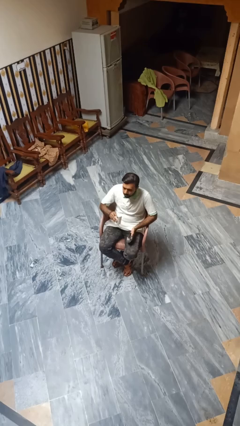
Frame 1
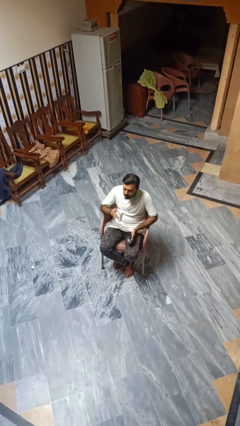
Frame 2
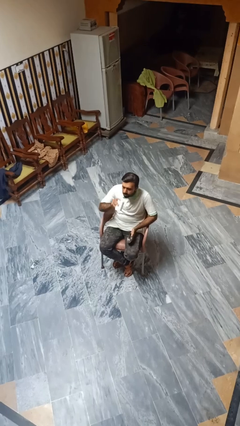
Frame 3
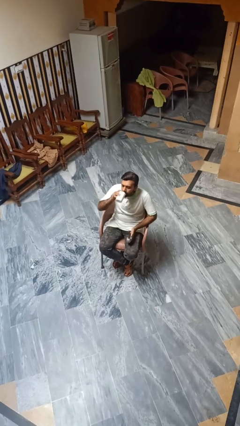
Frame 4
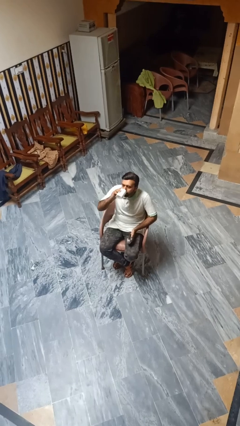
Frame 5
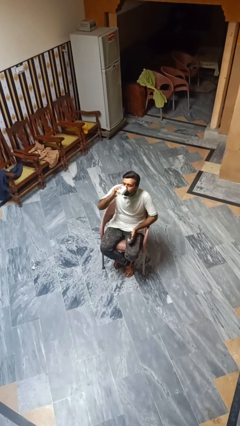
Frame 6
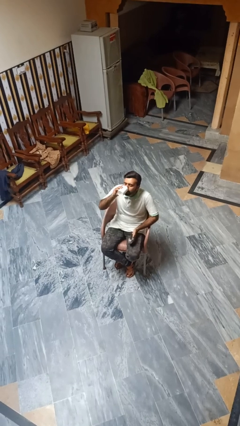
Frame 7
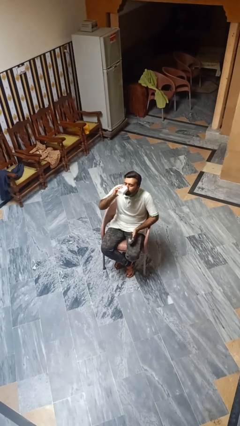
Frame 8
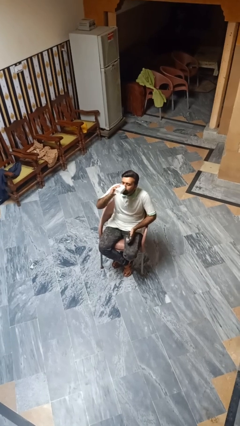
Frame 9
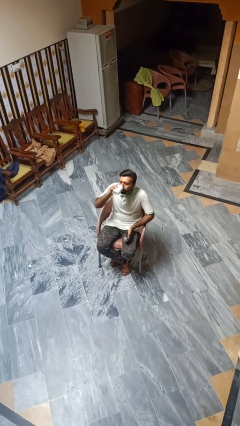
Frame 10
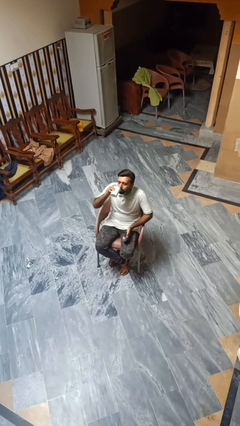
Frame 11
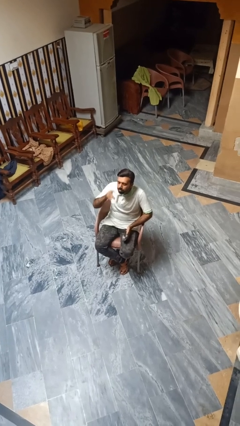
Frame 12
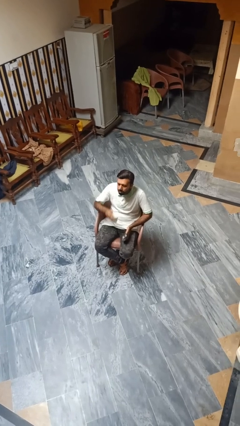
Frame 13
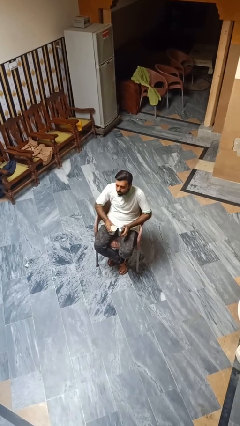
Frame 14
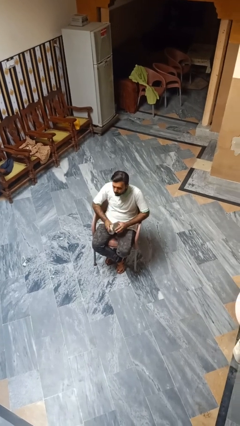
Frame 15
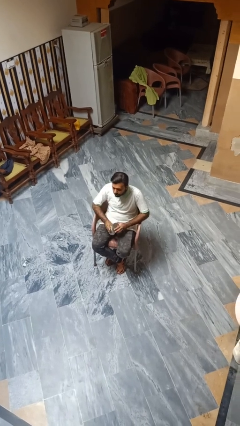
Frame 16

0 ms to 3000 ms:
person drinks from beverage can

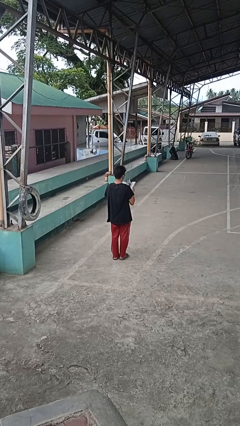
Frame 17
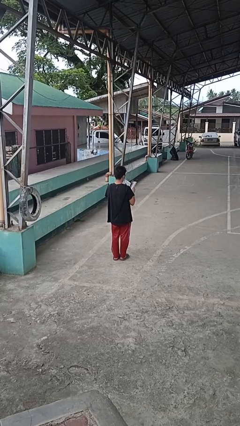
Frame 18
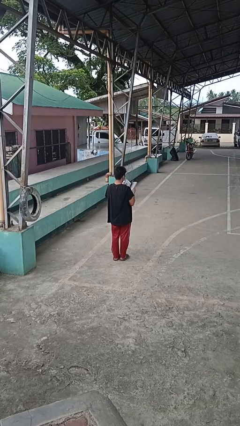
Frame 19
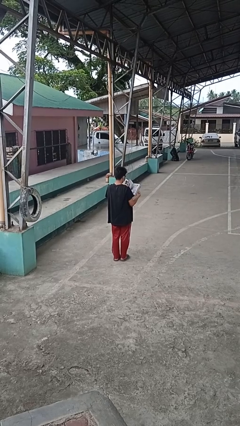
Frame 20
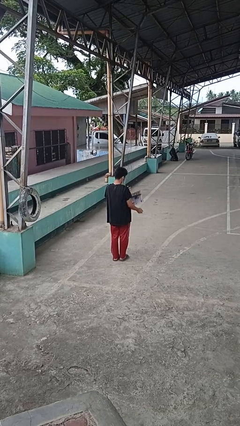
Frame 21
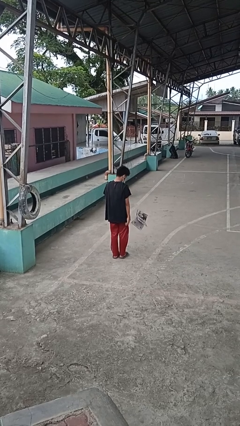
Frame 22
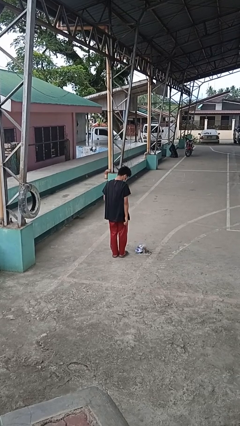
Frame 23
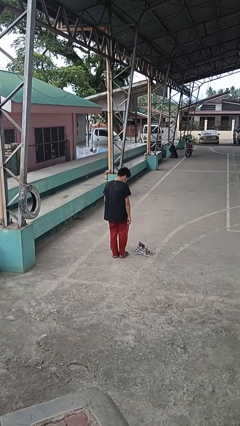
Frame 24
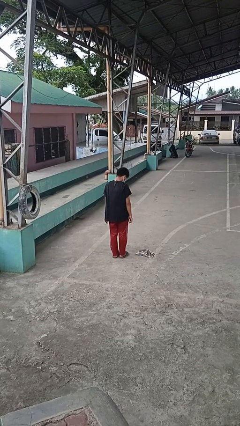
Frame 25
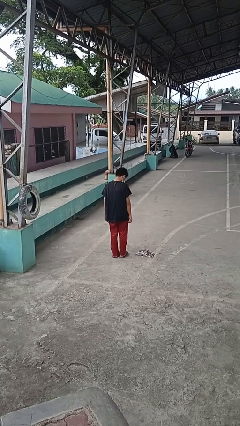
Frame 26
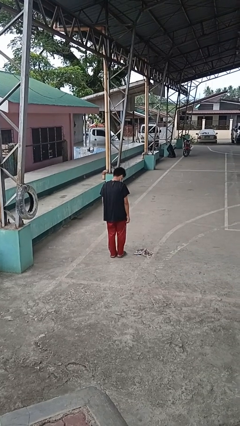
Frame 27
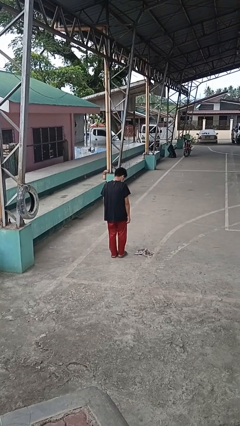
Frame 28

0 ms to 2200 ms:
person drops object

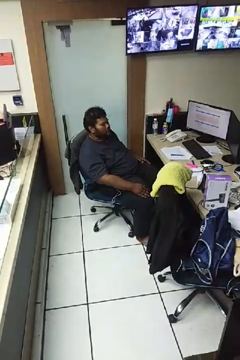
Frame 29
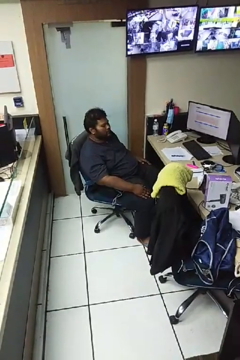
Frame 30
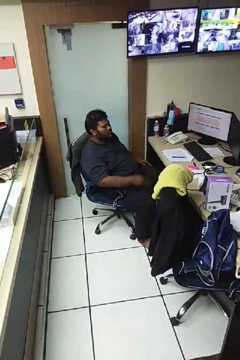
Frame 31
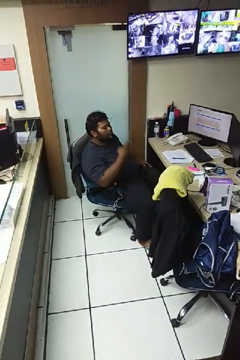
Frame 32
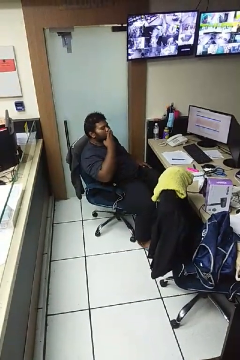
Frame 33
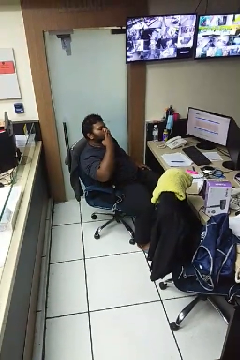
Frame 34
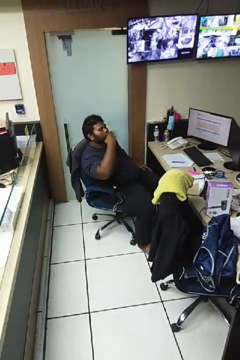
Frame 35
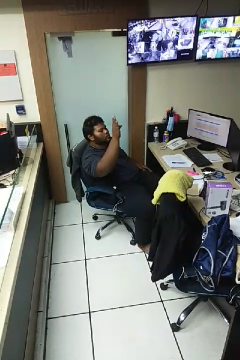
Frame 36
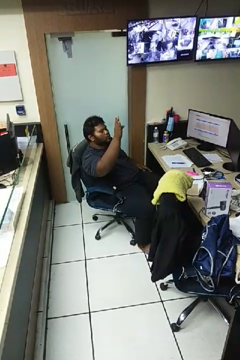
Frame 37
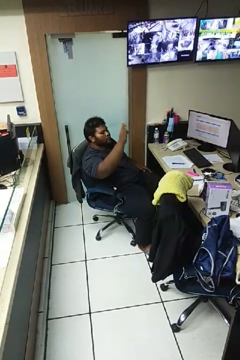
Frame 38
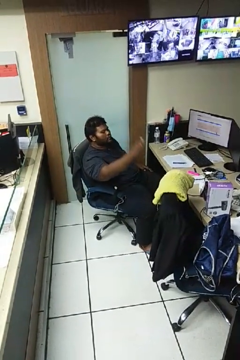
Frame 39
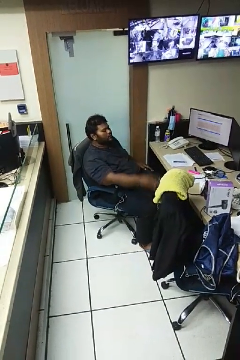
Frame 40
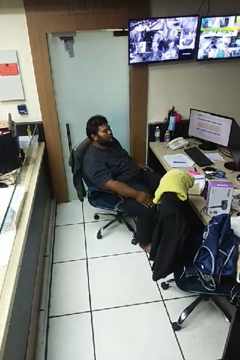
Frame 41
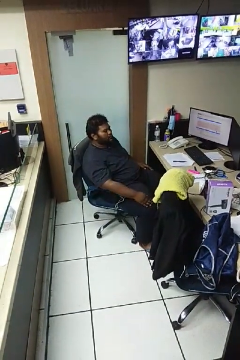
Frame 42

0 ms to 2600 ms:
person gestures blow kiss

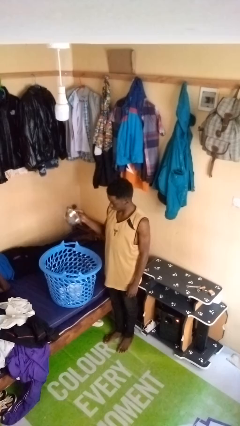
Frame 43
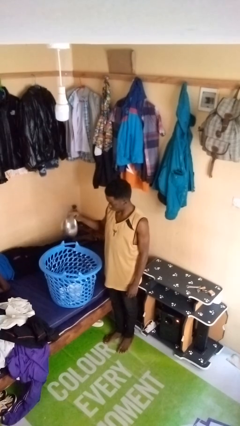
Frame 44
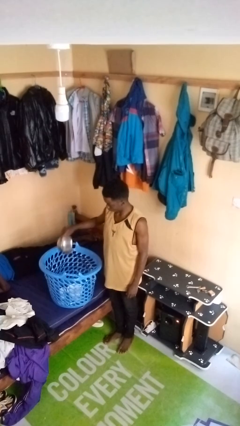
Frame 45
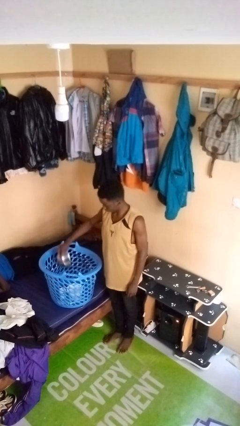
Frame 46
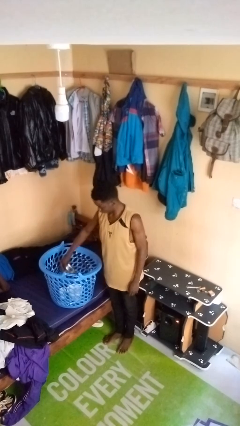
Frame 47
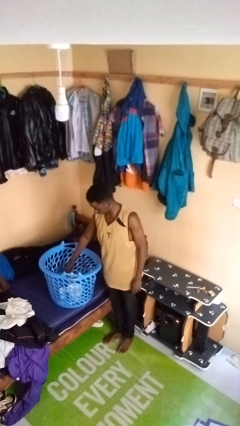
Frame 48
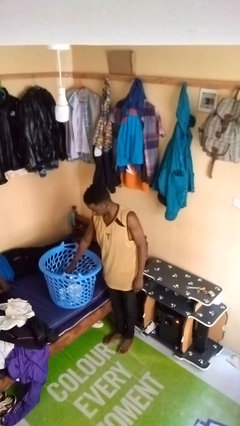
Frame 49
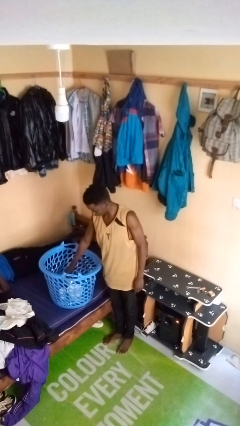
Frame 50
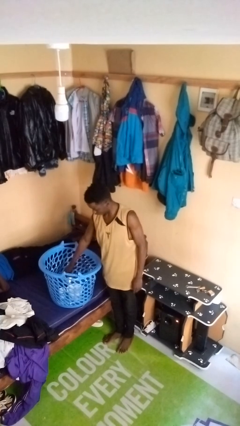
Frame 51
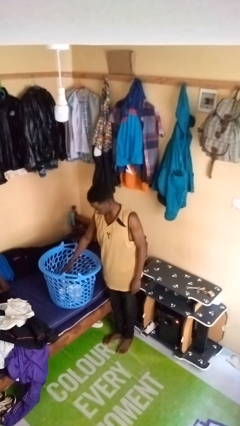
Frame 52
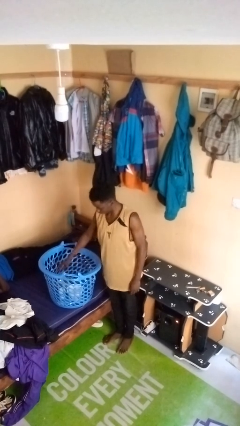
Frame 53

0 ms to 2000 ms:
person puts object into basket

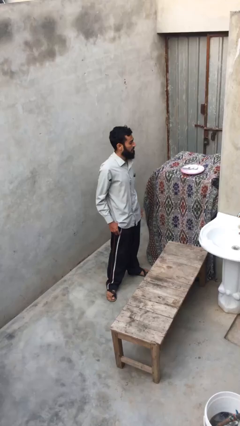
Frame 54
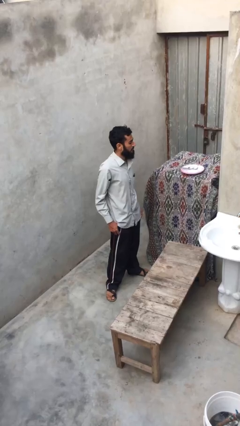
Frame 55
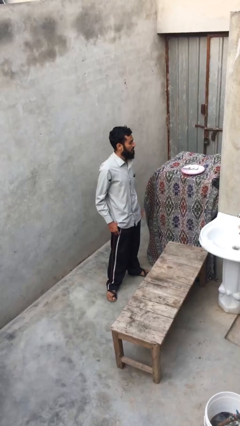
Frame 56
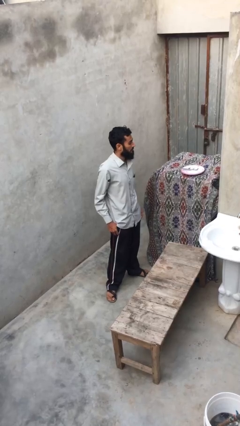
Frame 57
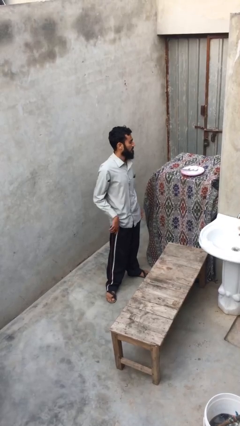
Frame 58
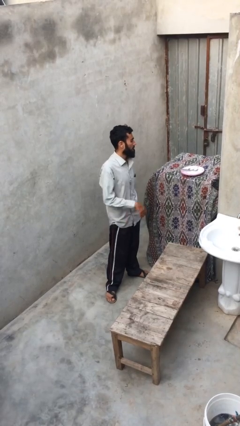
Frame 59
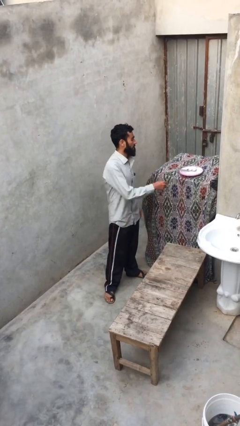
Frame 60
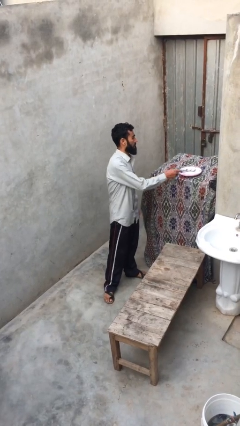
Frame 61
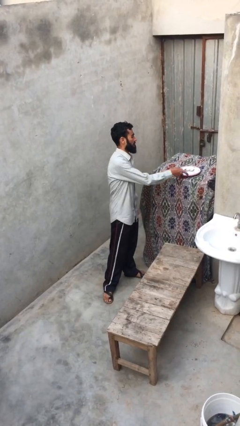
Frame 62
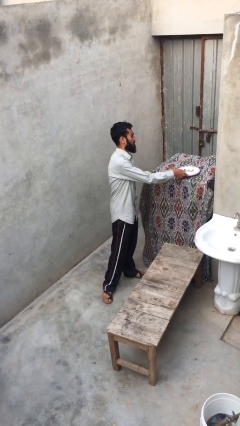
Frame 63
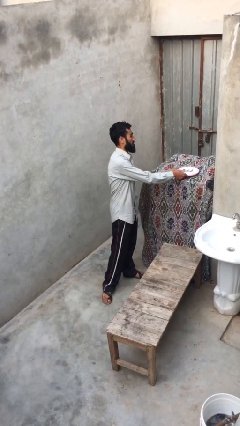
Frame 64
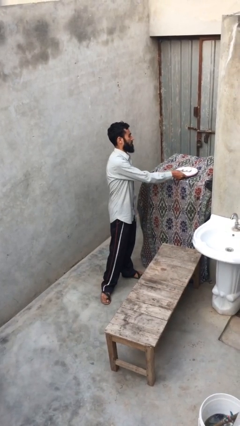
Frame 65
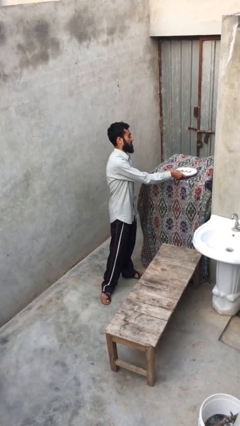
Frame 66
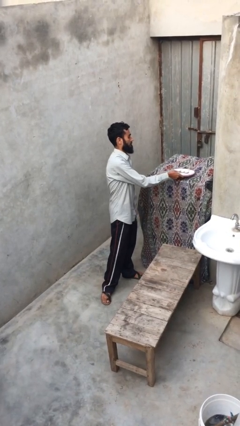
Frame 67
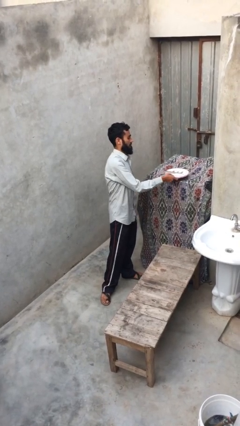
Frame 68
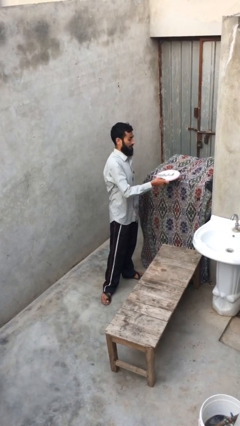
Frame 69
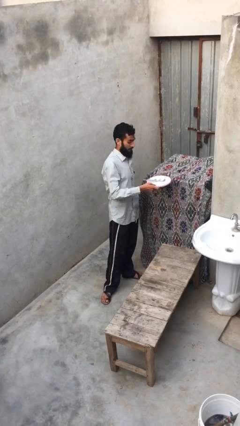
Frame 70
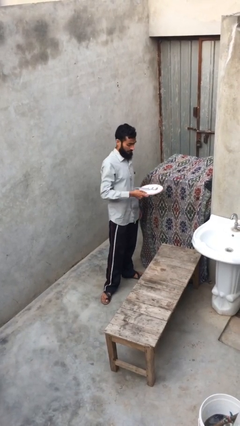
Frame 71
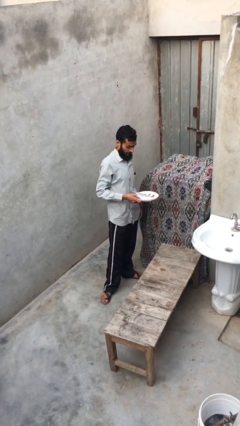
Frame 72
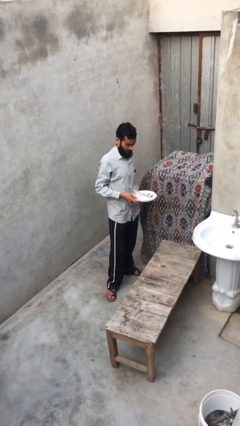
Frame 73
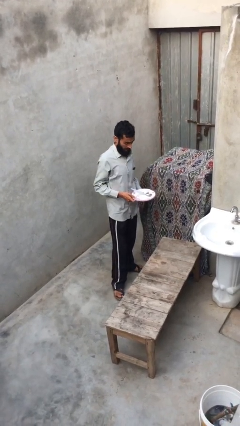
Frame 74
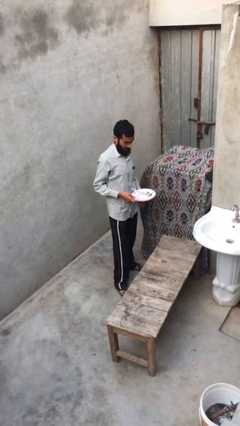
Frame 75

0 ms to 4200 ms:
person picks up object from shelf

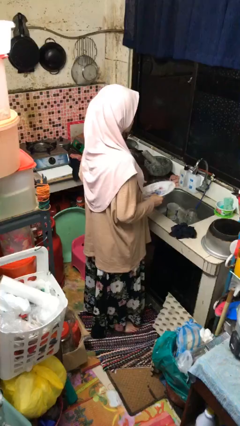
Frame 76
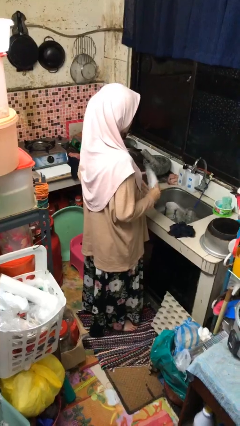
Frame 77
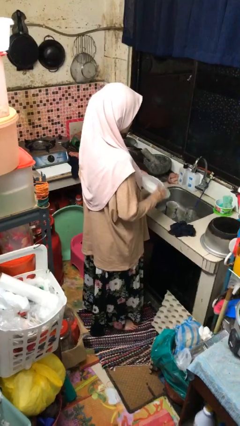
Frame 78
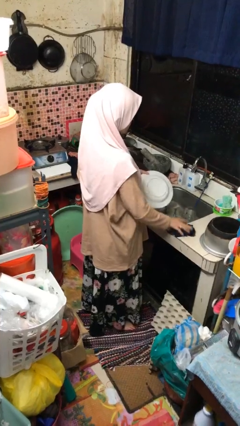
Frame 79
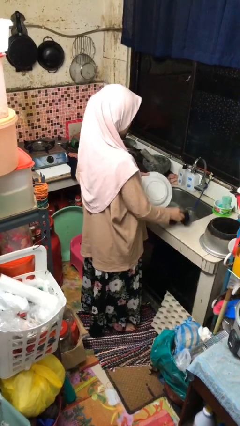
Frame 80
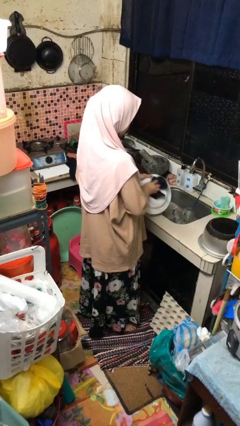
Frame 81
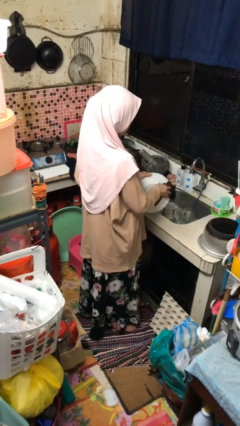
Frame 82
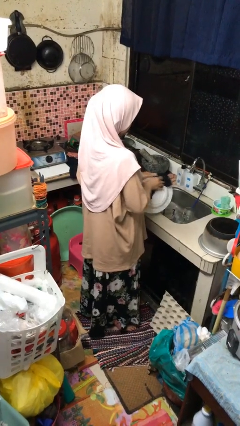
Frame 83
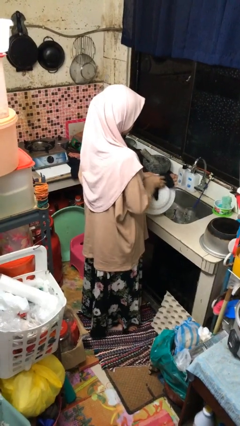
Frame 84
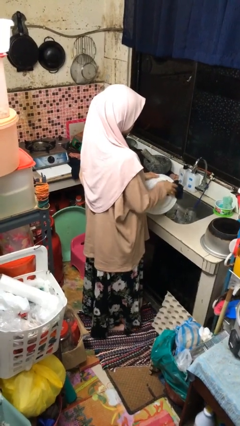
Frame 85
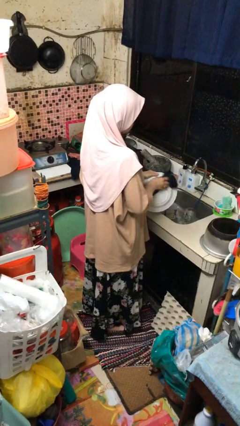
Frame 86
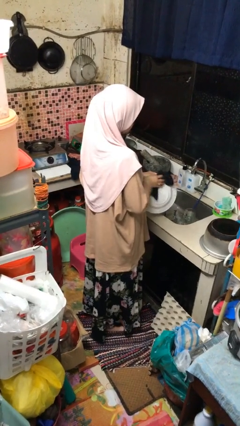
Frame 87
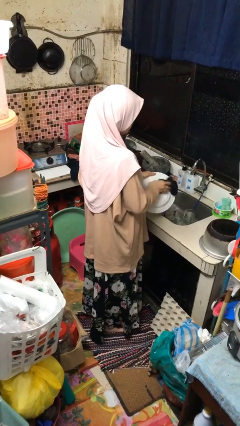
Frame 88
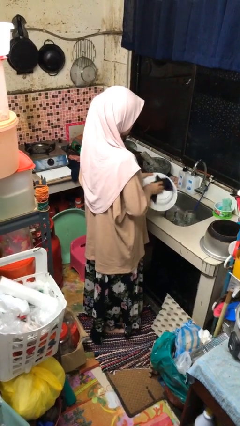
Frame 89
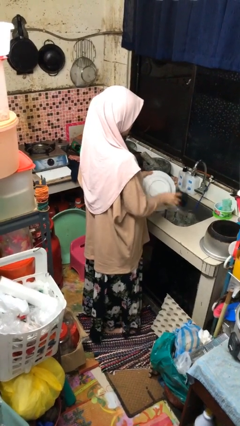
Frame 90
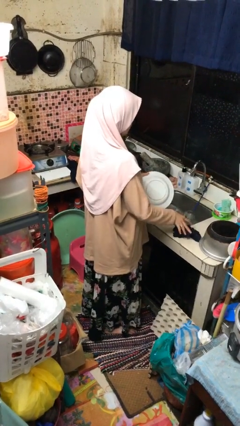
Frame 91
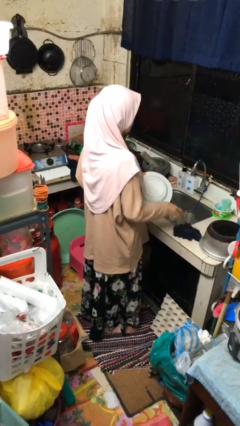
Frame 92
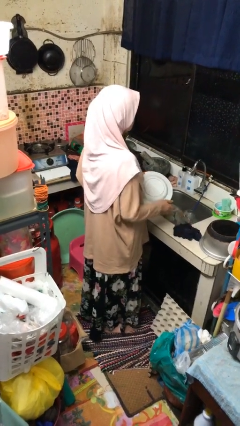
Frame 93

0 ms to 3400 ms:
person dries dish

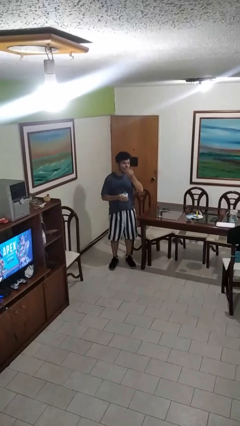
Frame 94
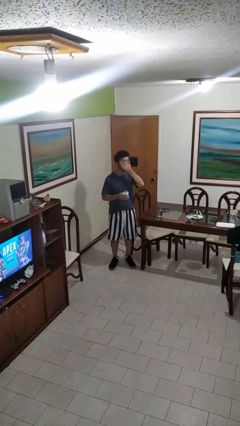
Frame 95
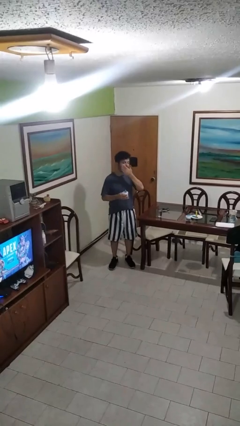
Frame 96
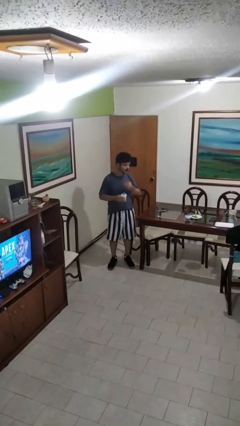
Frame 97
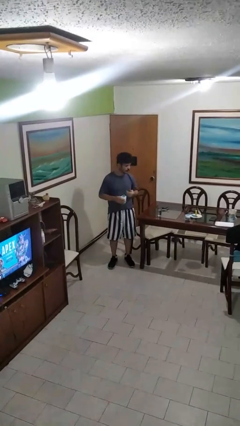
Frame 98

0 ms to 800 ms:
person takes medicine pills
